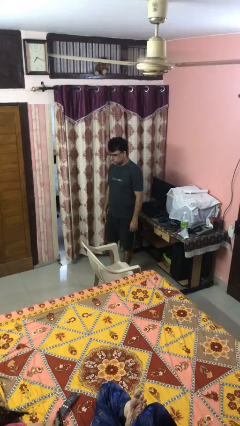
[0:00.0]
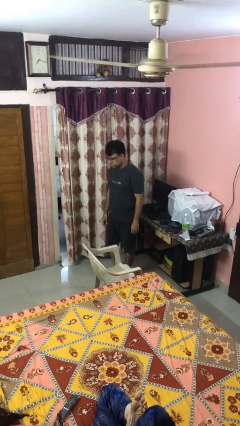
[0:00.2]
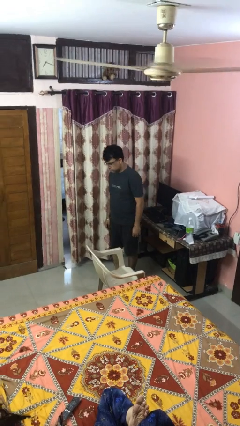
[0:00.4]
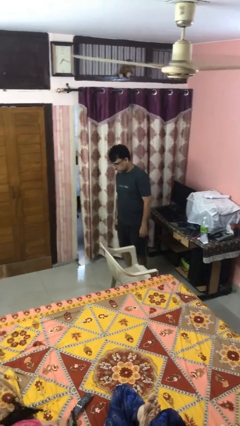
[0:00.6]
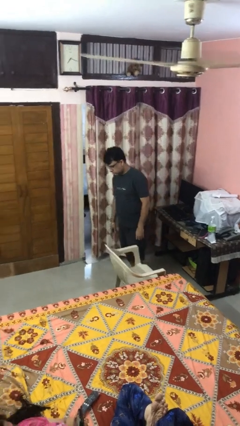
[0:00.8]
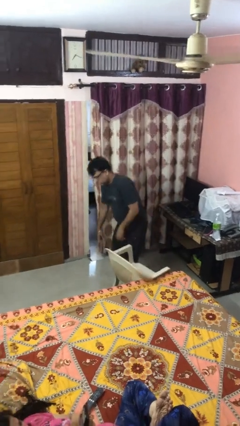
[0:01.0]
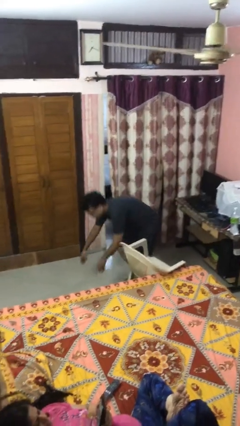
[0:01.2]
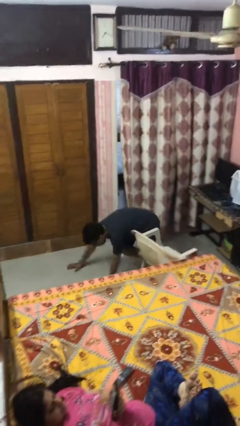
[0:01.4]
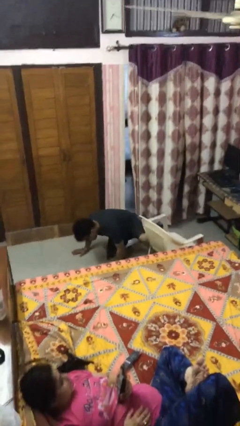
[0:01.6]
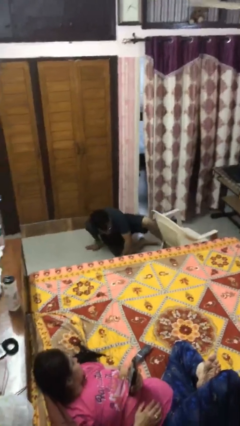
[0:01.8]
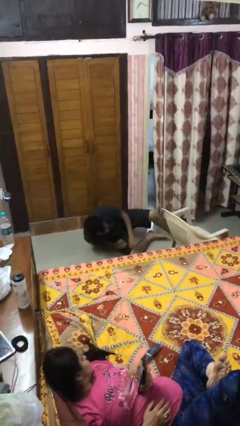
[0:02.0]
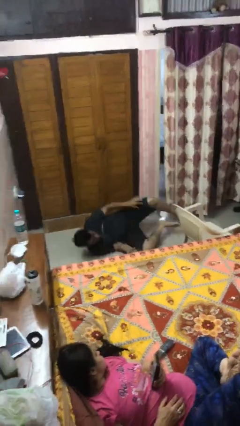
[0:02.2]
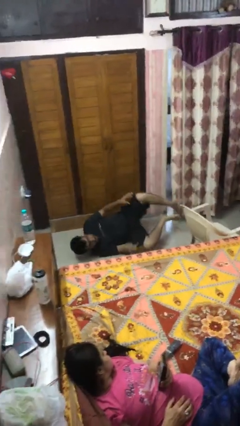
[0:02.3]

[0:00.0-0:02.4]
person trips on object on floor

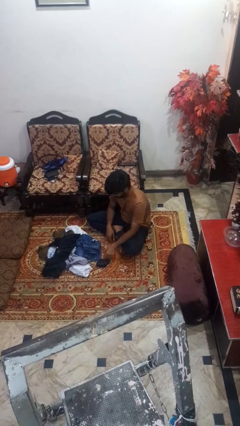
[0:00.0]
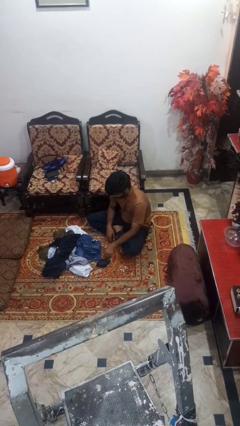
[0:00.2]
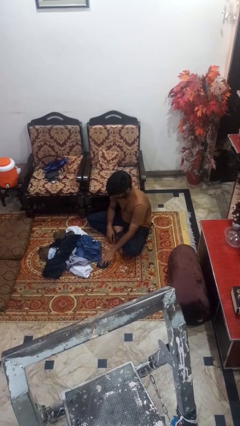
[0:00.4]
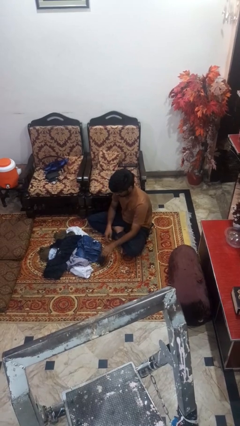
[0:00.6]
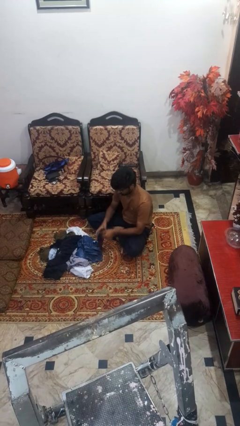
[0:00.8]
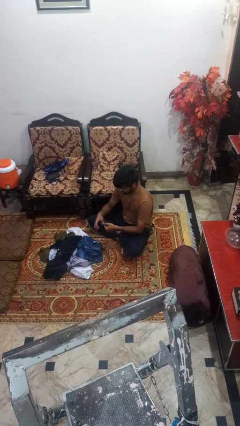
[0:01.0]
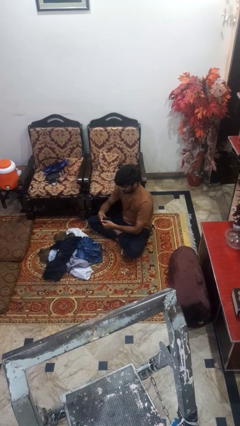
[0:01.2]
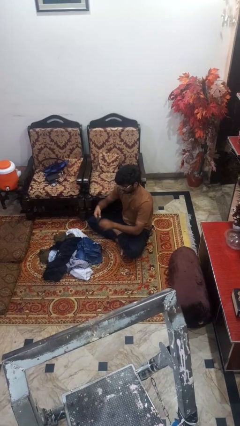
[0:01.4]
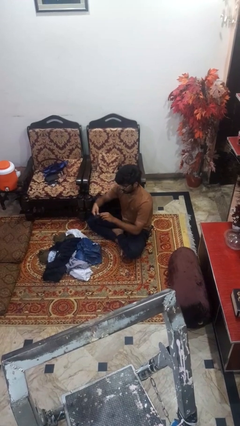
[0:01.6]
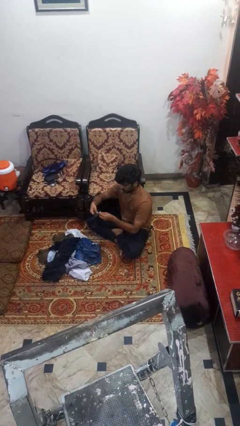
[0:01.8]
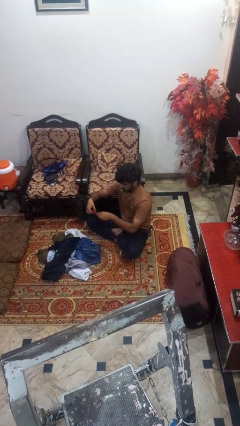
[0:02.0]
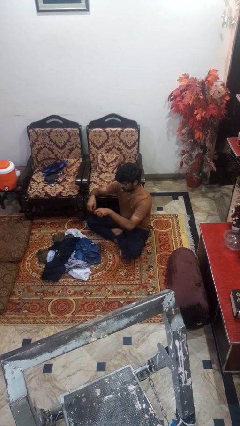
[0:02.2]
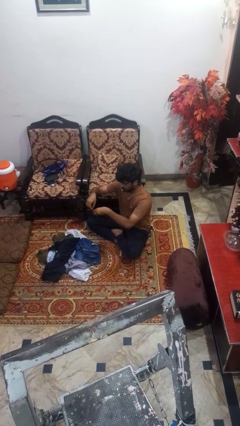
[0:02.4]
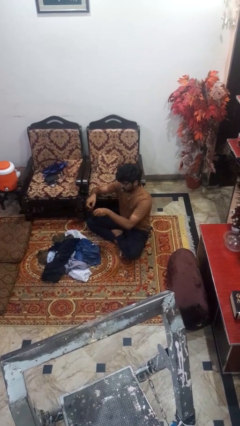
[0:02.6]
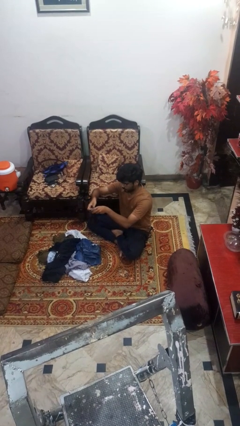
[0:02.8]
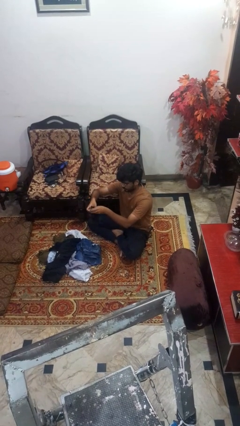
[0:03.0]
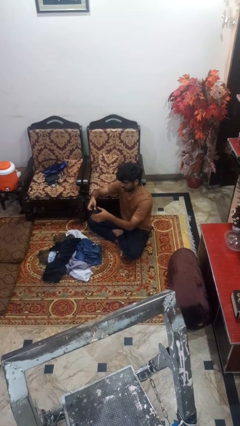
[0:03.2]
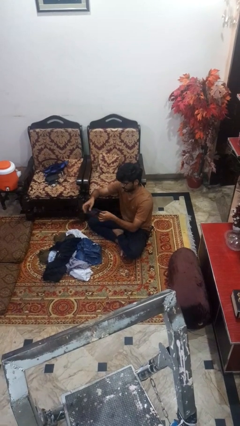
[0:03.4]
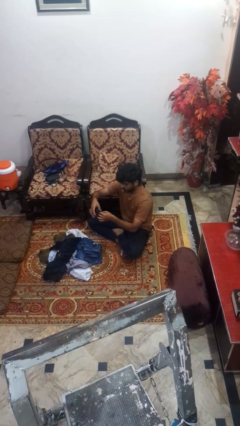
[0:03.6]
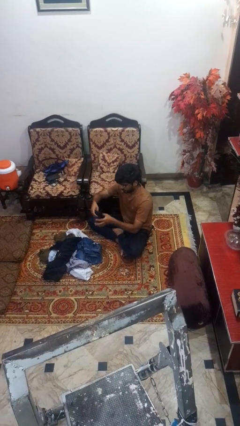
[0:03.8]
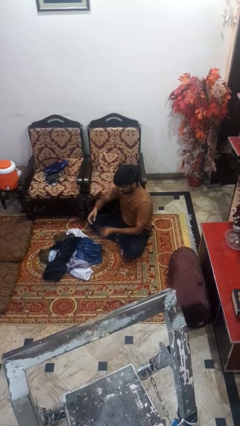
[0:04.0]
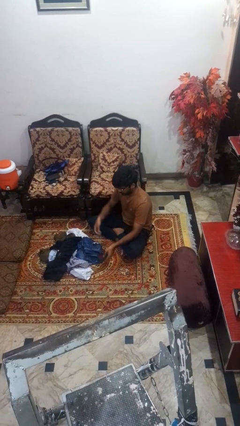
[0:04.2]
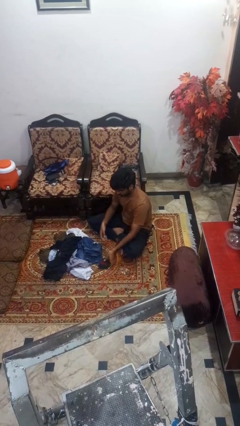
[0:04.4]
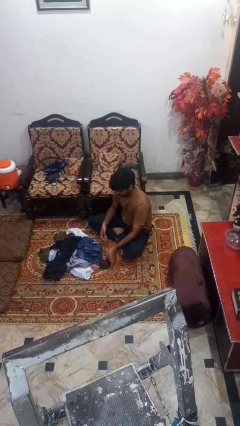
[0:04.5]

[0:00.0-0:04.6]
person folds socks

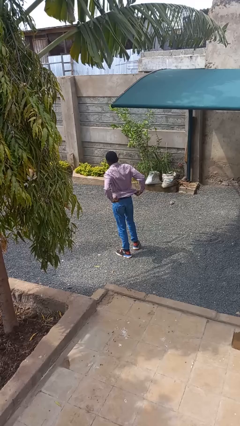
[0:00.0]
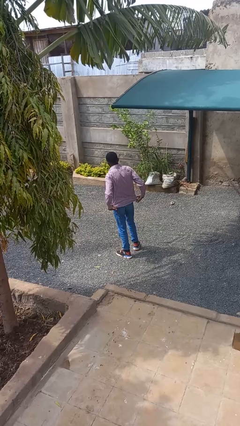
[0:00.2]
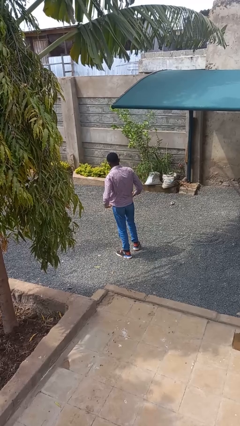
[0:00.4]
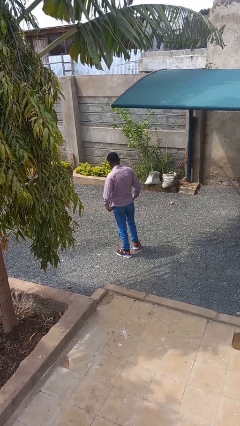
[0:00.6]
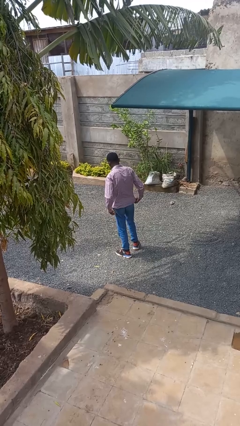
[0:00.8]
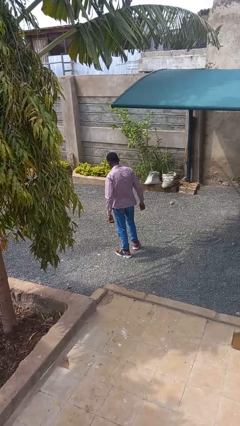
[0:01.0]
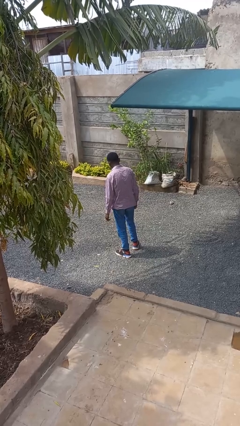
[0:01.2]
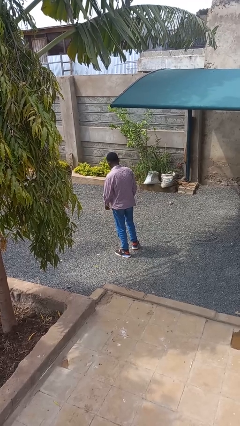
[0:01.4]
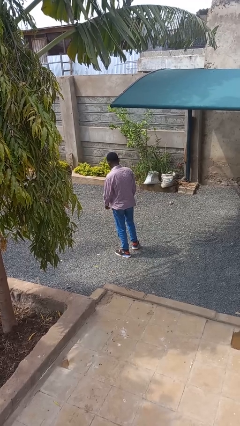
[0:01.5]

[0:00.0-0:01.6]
person untucks shirt

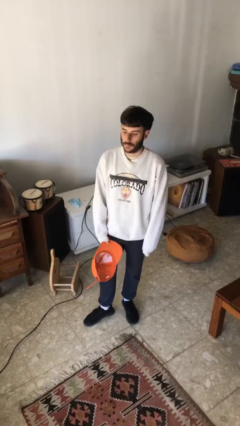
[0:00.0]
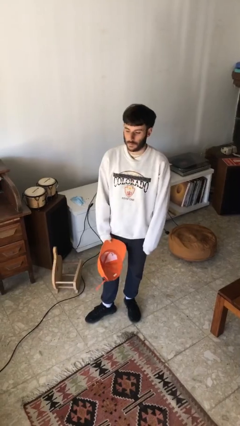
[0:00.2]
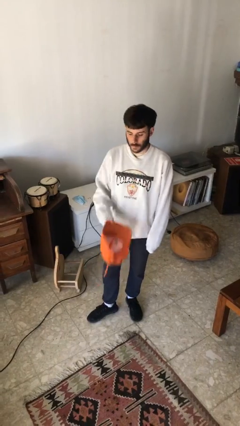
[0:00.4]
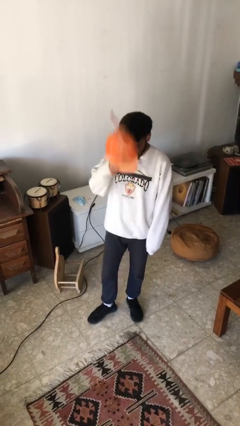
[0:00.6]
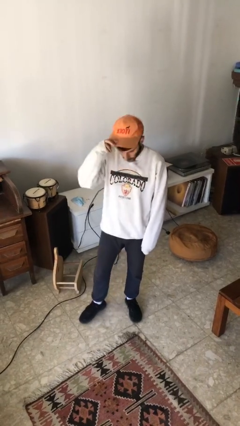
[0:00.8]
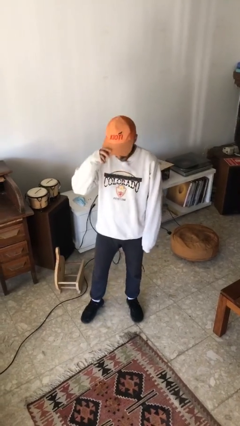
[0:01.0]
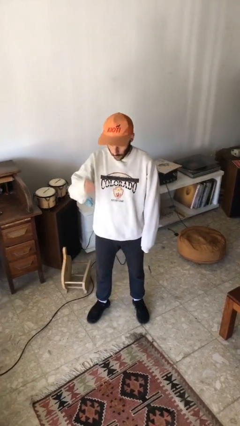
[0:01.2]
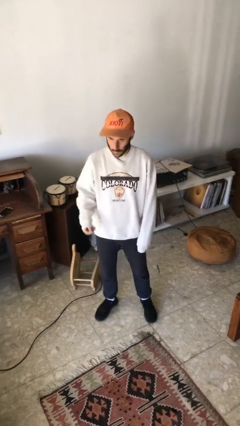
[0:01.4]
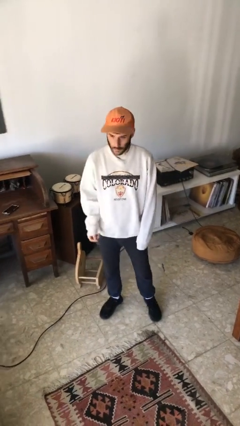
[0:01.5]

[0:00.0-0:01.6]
person puts on hat

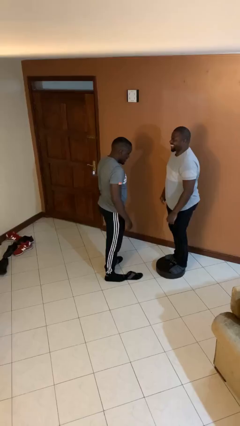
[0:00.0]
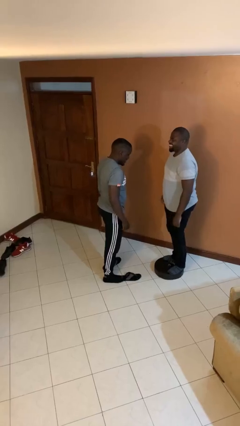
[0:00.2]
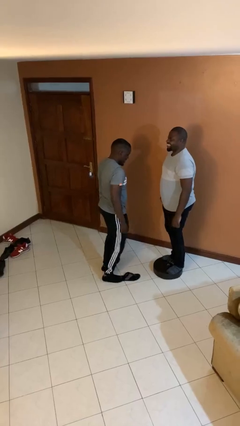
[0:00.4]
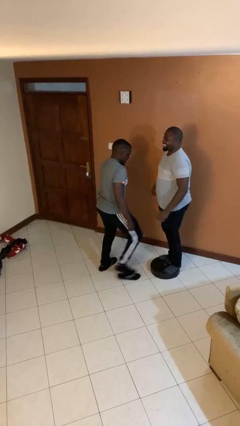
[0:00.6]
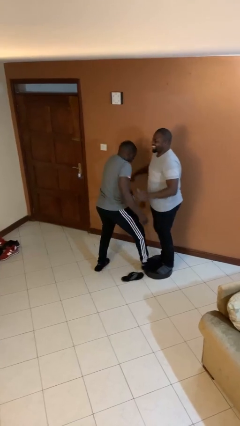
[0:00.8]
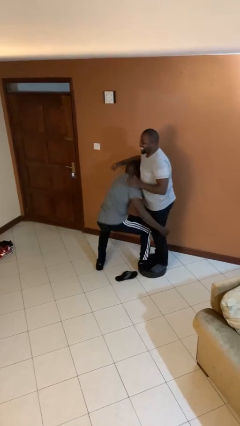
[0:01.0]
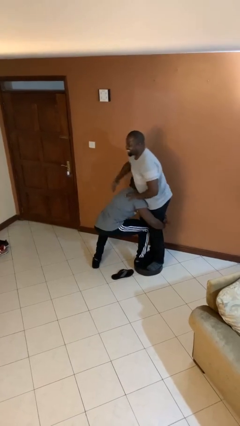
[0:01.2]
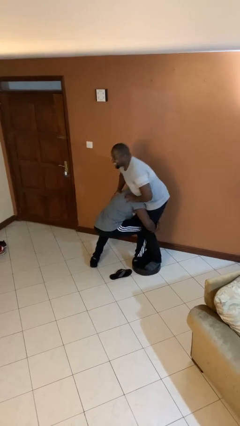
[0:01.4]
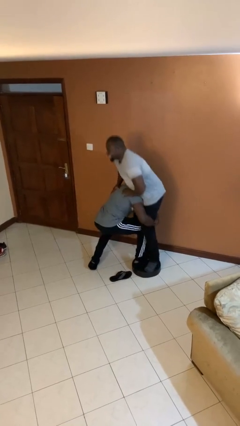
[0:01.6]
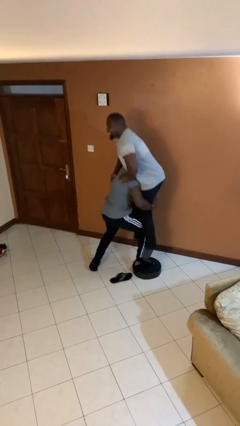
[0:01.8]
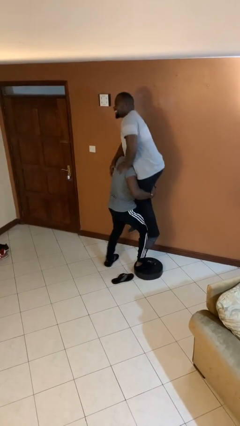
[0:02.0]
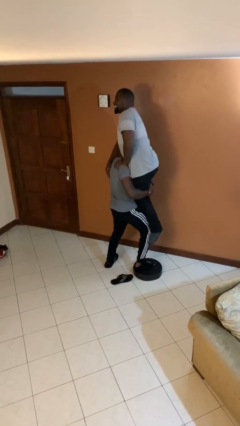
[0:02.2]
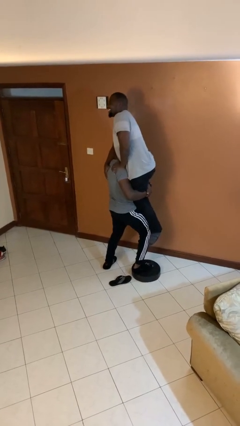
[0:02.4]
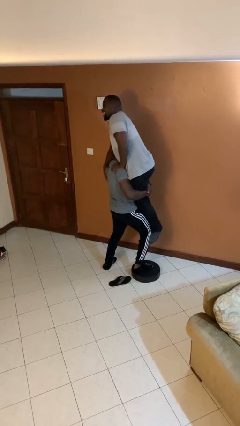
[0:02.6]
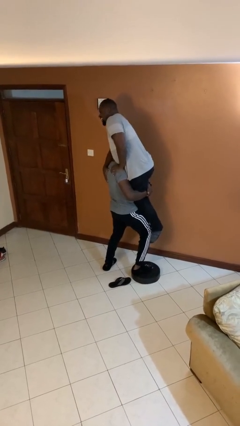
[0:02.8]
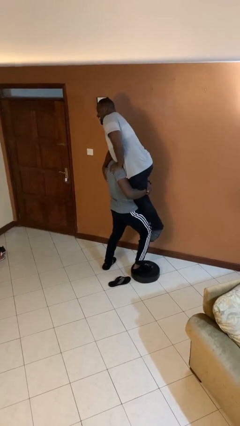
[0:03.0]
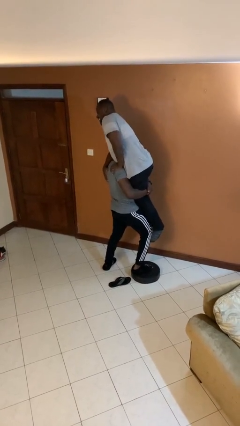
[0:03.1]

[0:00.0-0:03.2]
person picks up person

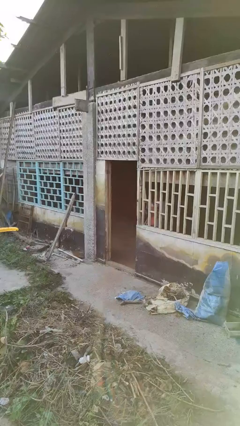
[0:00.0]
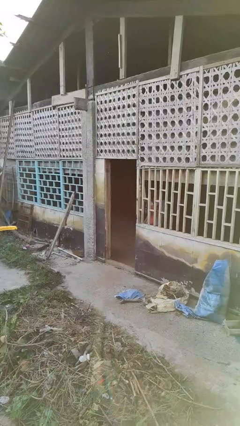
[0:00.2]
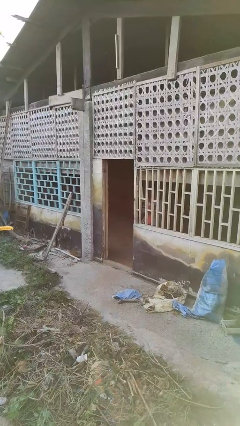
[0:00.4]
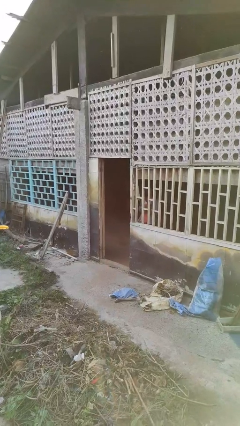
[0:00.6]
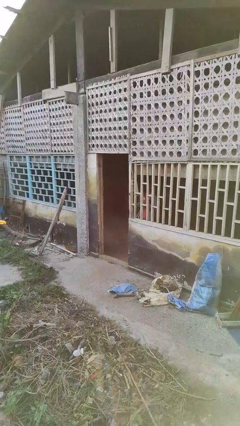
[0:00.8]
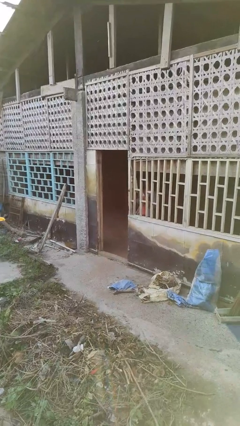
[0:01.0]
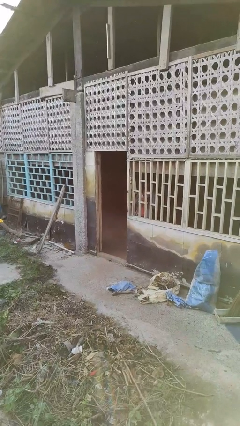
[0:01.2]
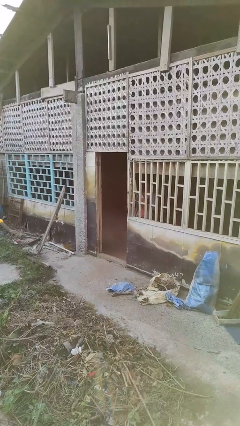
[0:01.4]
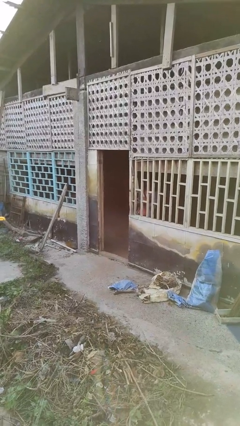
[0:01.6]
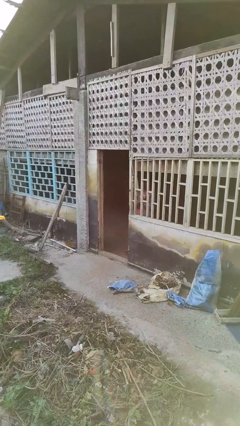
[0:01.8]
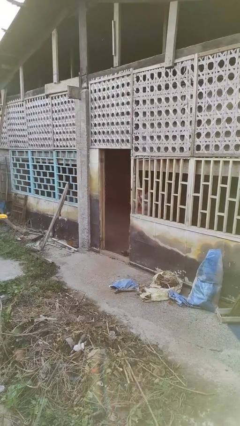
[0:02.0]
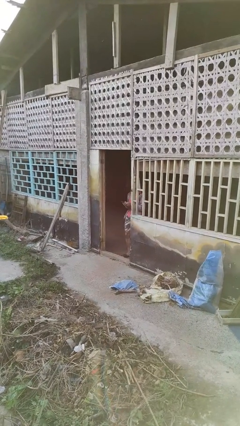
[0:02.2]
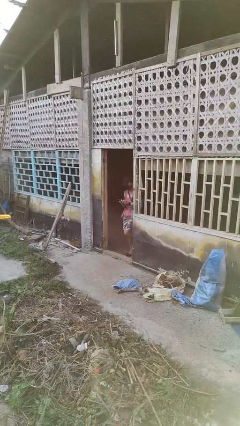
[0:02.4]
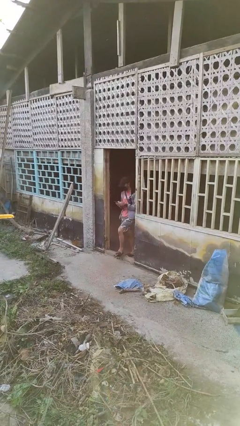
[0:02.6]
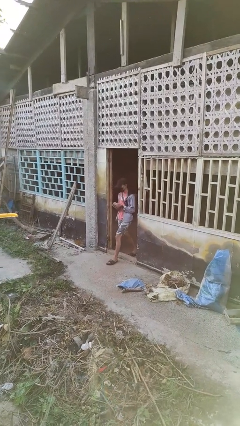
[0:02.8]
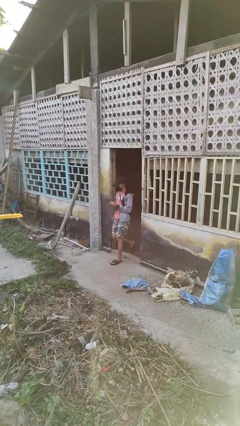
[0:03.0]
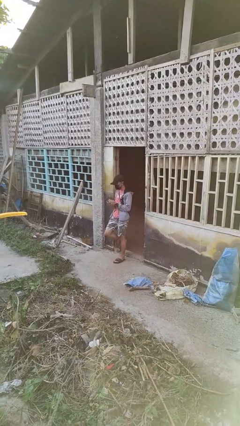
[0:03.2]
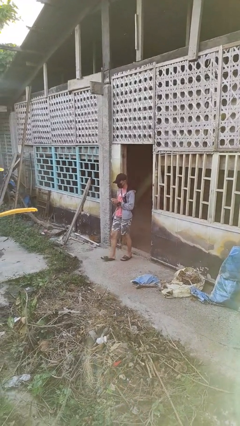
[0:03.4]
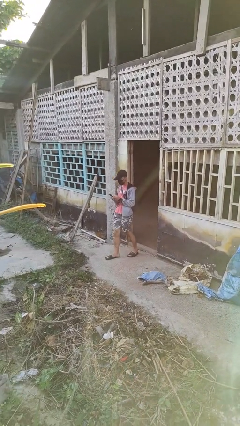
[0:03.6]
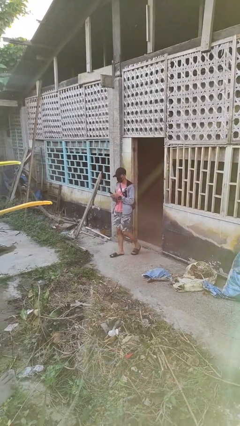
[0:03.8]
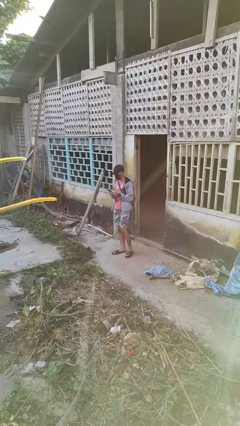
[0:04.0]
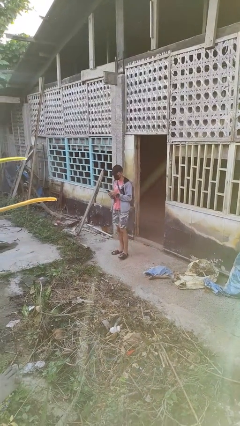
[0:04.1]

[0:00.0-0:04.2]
person enters scene through structure
